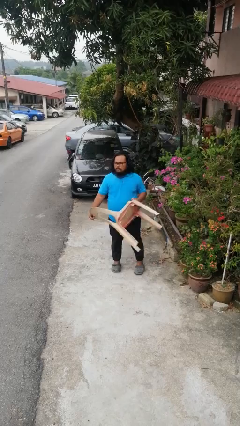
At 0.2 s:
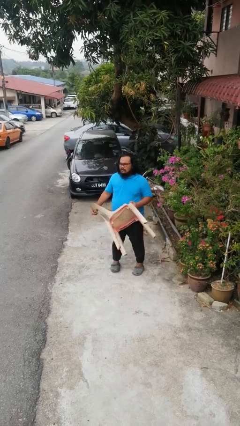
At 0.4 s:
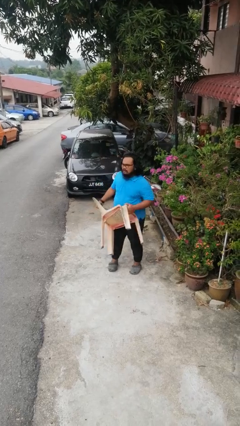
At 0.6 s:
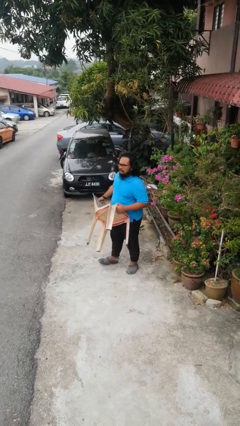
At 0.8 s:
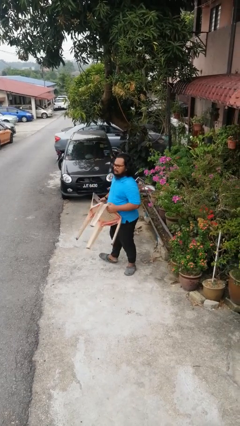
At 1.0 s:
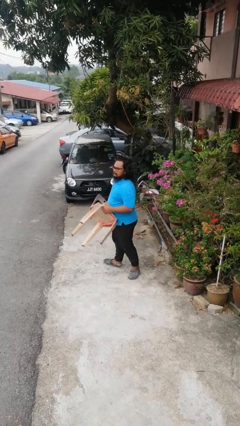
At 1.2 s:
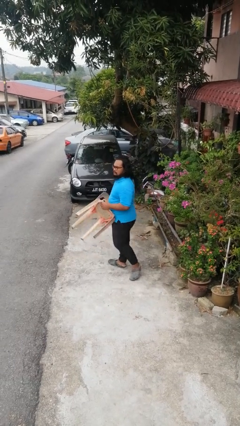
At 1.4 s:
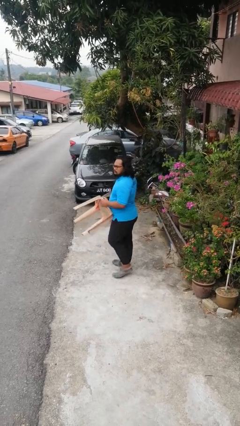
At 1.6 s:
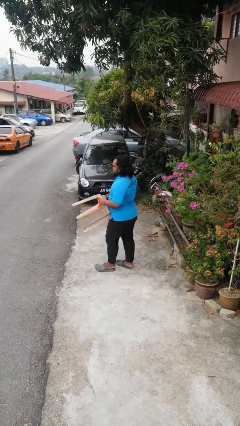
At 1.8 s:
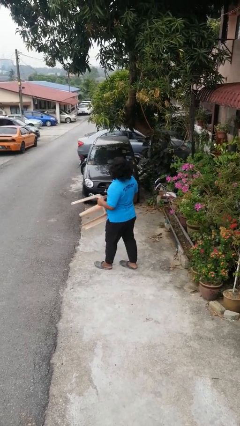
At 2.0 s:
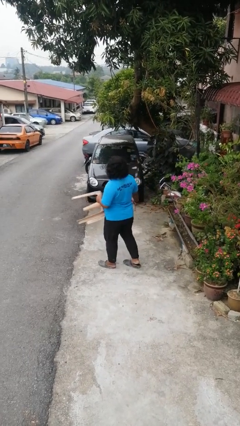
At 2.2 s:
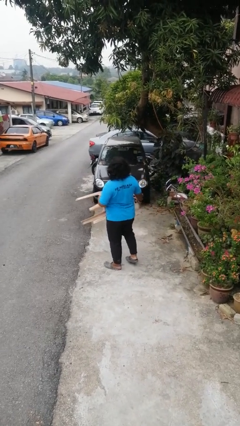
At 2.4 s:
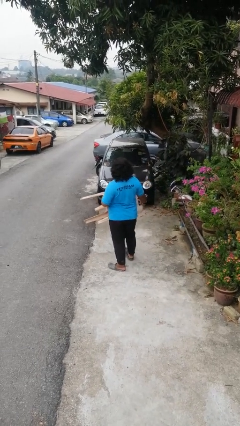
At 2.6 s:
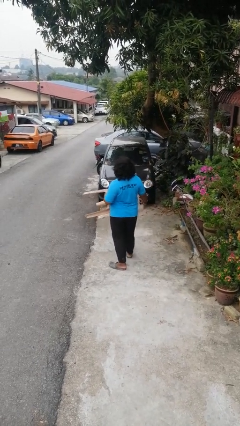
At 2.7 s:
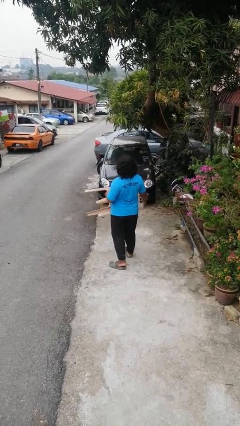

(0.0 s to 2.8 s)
person carries furniture

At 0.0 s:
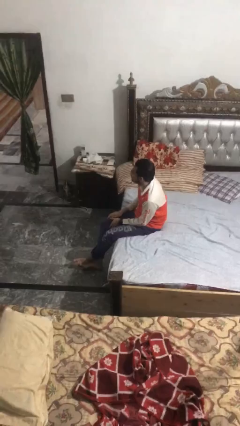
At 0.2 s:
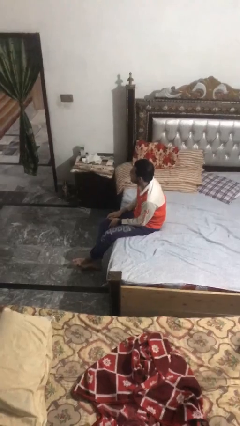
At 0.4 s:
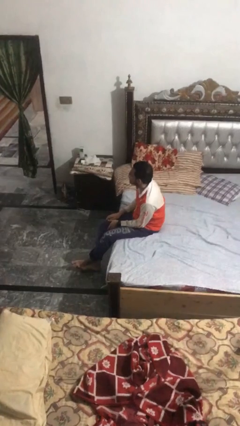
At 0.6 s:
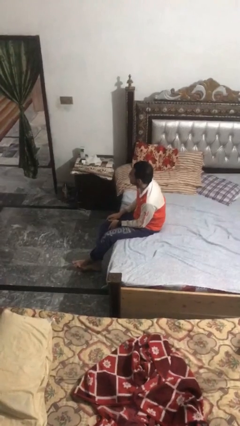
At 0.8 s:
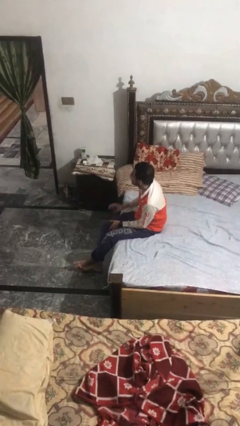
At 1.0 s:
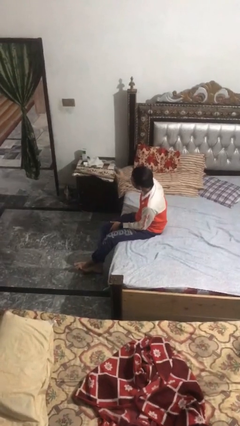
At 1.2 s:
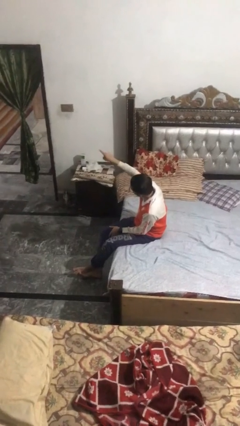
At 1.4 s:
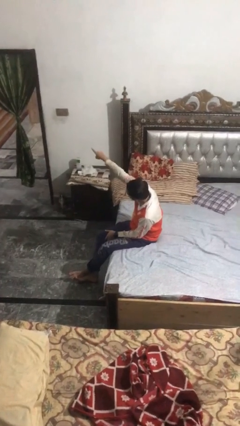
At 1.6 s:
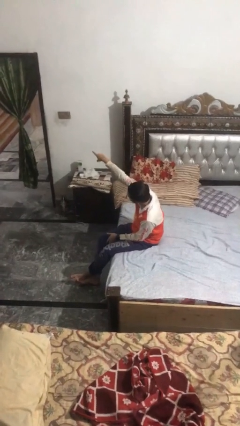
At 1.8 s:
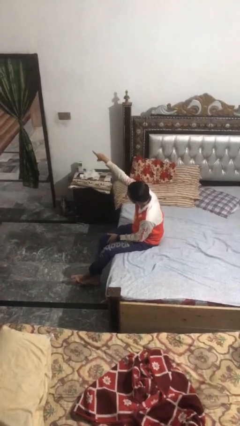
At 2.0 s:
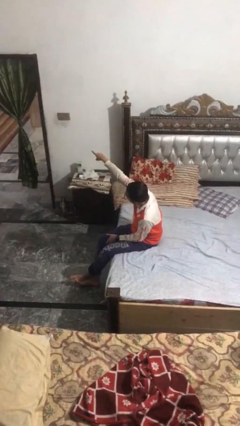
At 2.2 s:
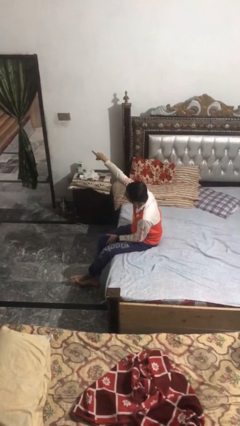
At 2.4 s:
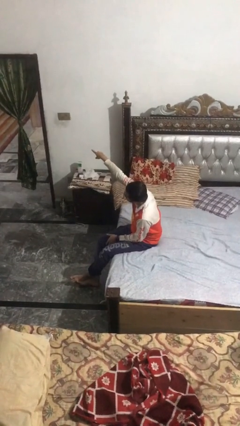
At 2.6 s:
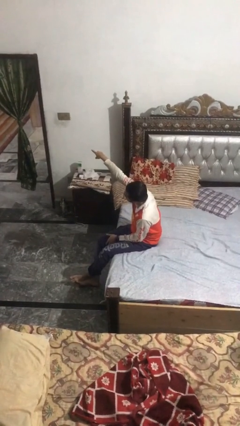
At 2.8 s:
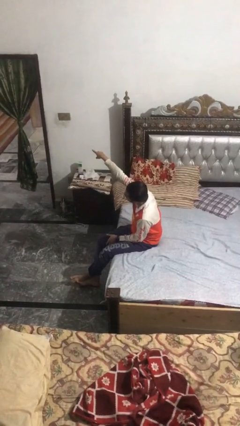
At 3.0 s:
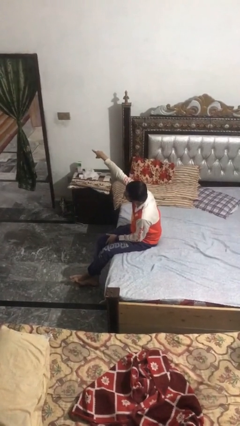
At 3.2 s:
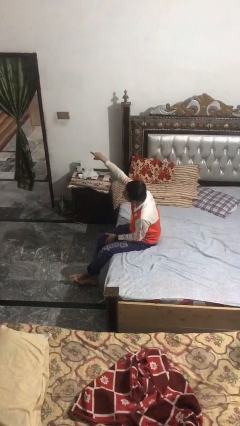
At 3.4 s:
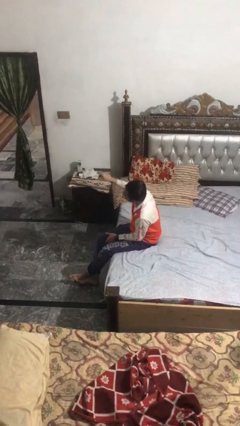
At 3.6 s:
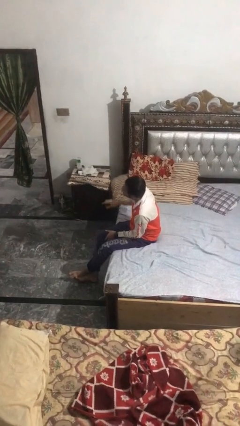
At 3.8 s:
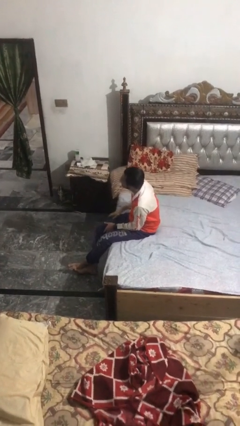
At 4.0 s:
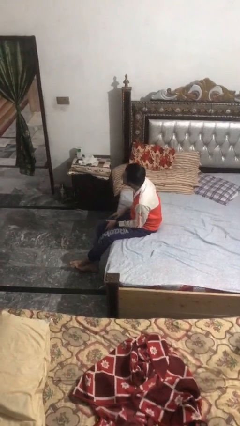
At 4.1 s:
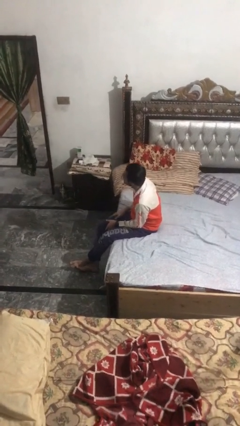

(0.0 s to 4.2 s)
person points at person

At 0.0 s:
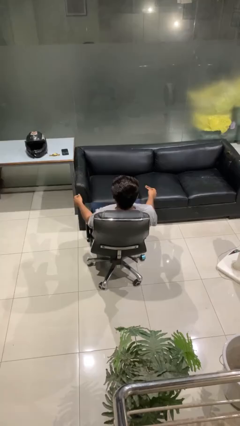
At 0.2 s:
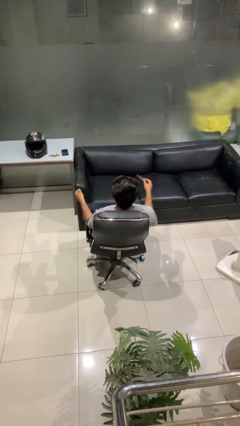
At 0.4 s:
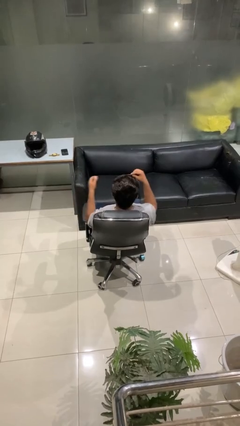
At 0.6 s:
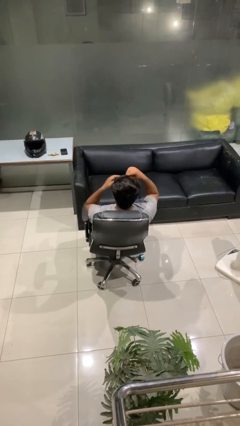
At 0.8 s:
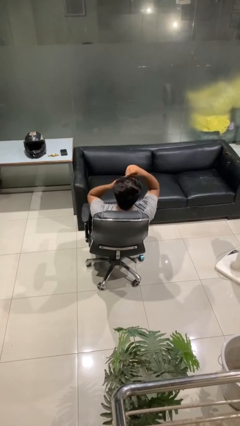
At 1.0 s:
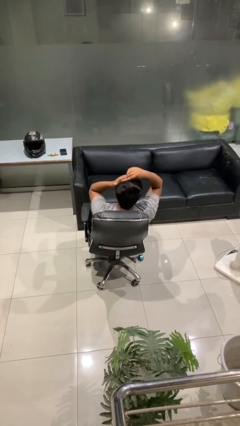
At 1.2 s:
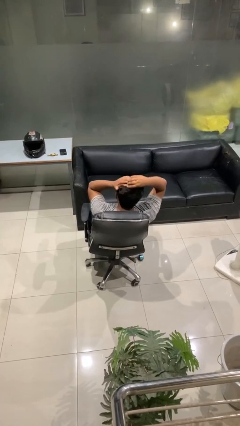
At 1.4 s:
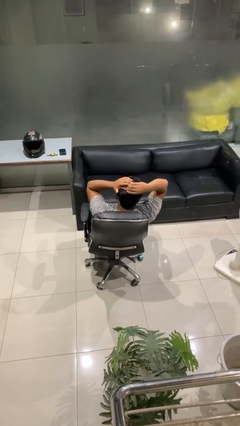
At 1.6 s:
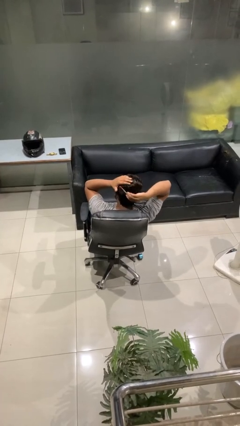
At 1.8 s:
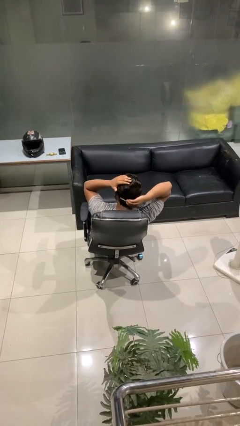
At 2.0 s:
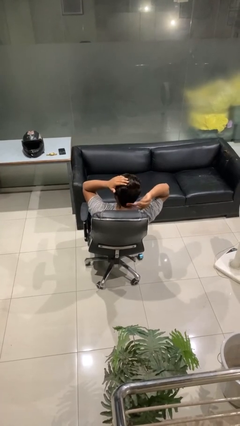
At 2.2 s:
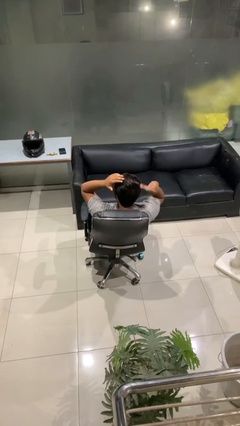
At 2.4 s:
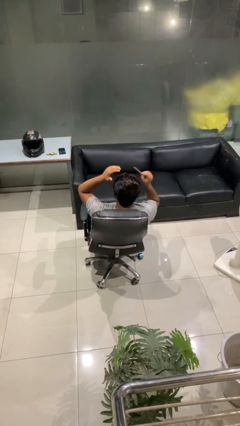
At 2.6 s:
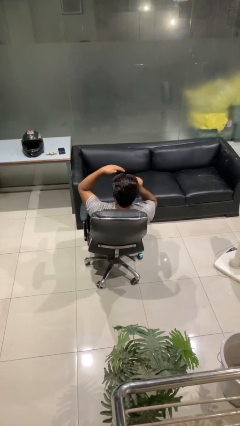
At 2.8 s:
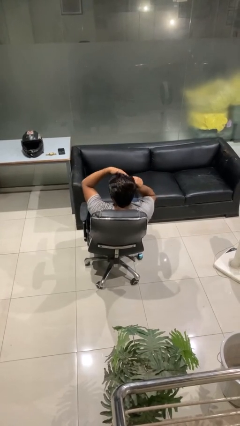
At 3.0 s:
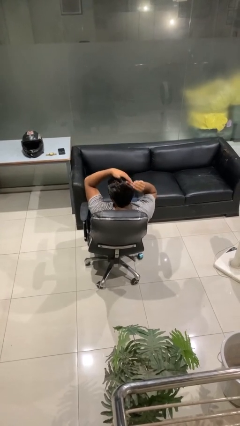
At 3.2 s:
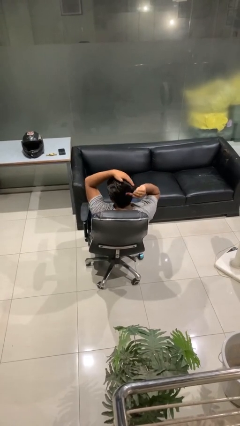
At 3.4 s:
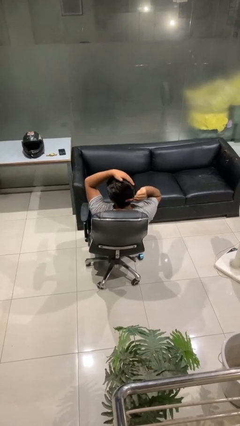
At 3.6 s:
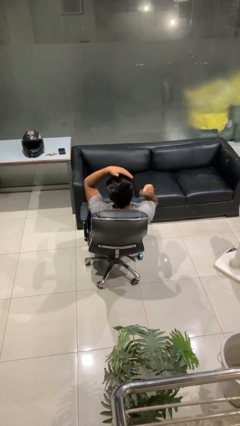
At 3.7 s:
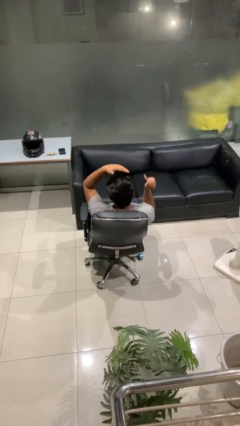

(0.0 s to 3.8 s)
person brushes hair

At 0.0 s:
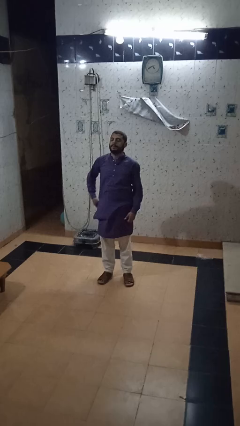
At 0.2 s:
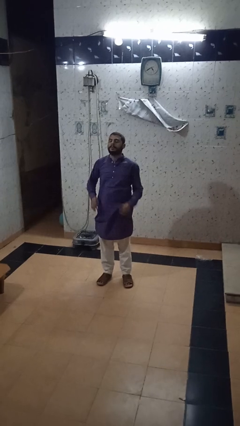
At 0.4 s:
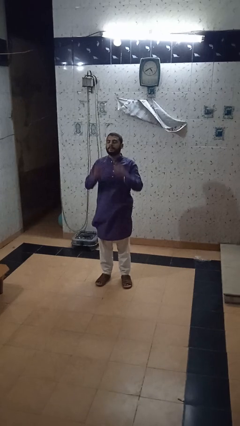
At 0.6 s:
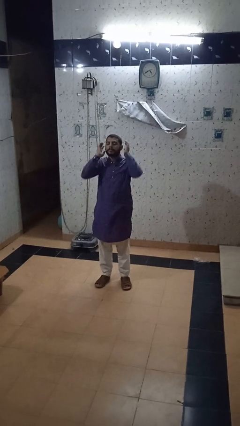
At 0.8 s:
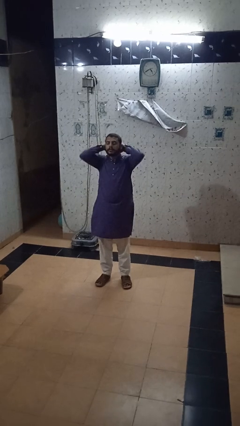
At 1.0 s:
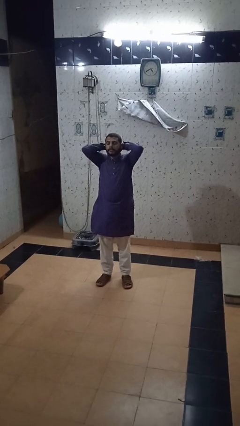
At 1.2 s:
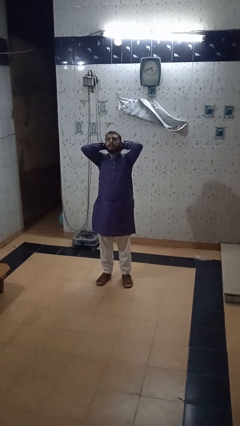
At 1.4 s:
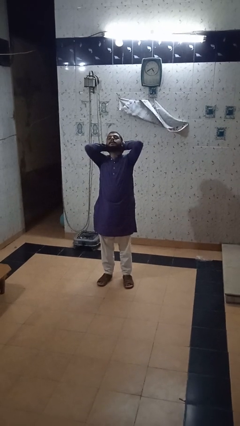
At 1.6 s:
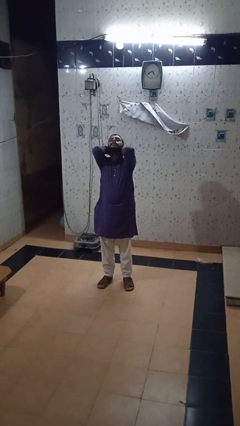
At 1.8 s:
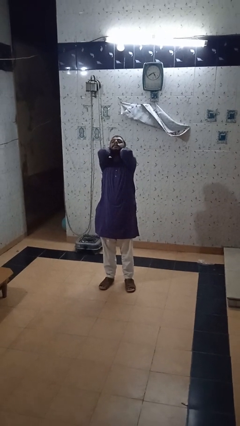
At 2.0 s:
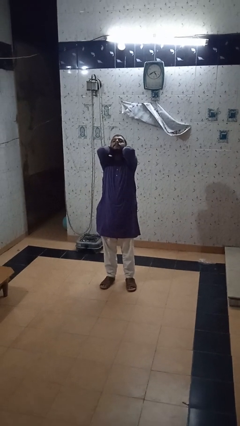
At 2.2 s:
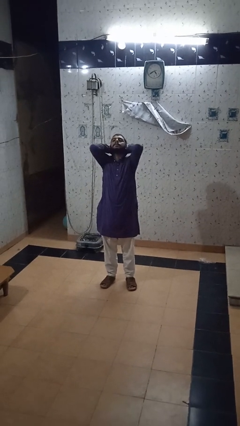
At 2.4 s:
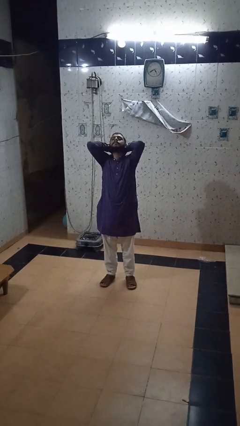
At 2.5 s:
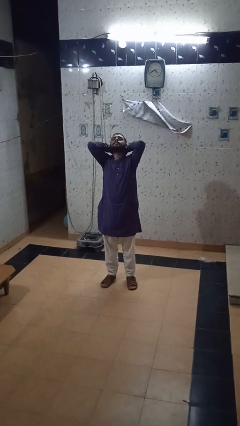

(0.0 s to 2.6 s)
person stretches arms over head

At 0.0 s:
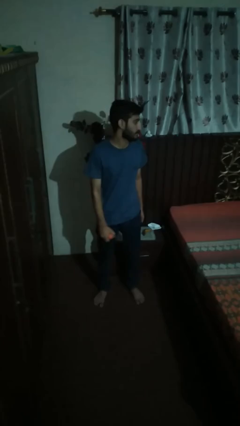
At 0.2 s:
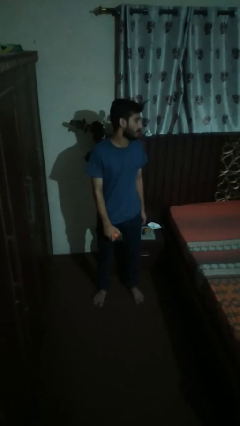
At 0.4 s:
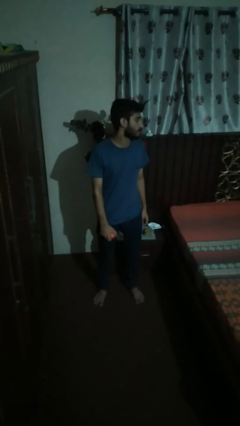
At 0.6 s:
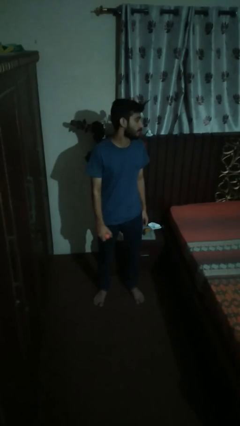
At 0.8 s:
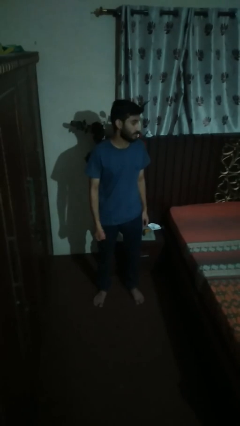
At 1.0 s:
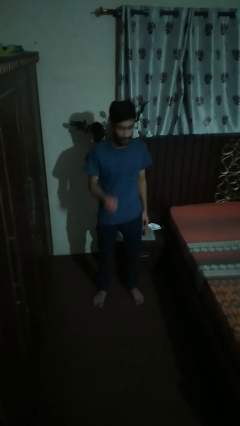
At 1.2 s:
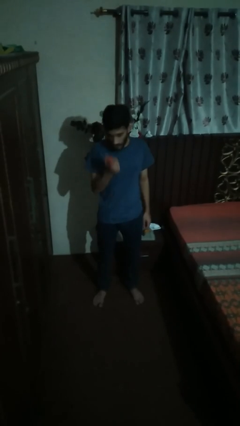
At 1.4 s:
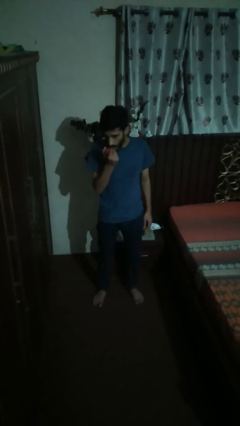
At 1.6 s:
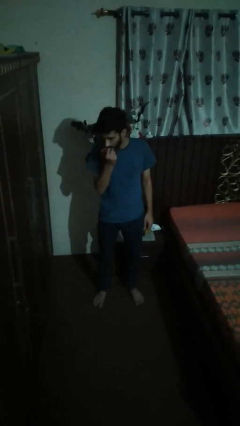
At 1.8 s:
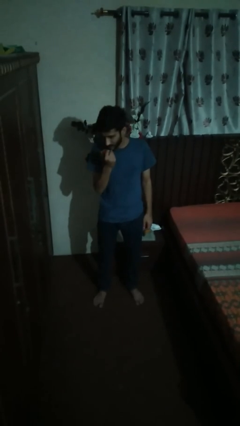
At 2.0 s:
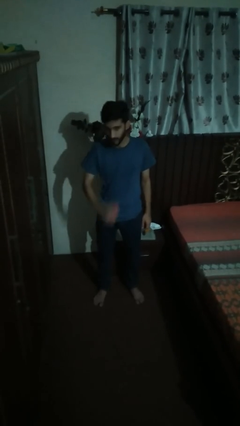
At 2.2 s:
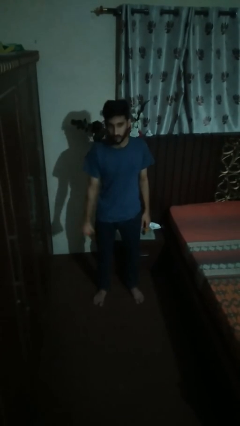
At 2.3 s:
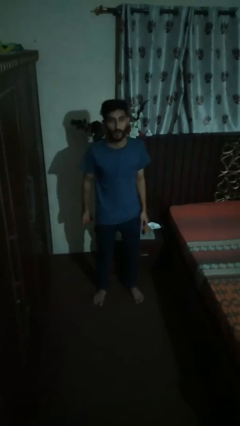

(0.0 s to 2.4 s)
person eats apple

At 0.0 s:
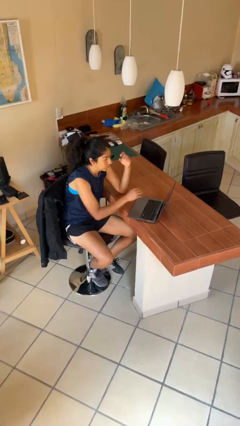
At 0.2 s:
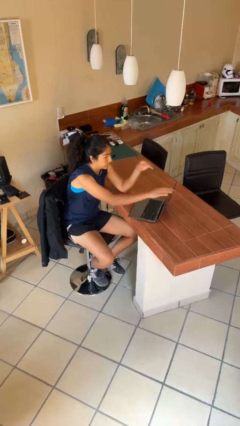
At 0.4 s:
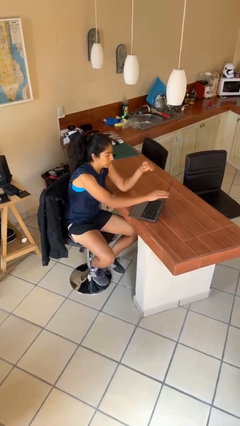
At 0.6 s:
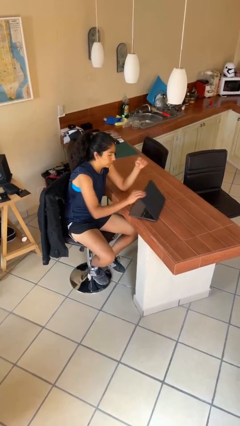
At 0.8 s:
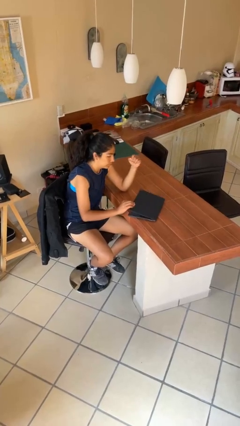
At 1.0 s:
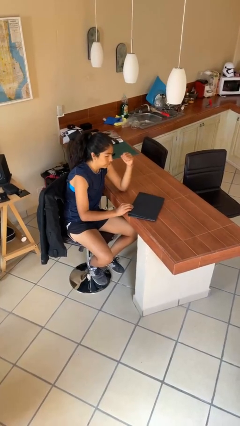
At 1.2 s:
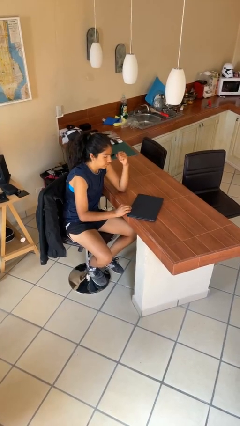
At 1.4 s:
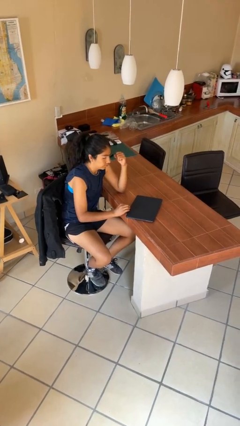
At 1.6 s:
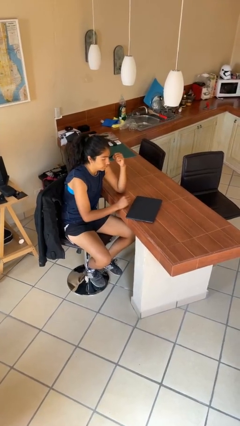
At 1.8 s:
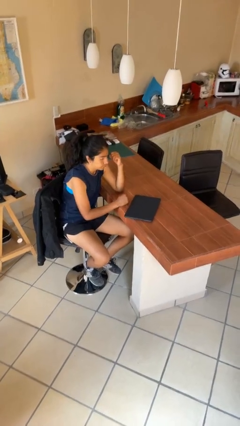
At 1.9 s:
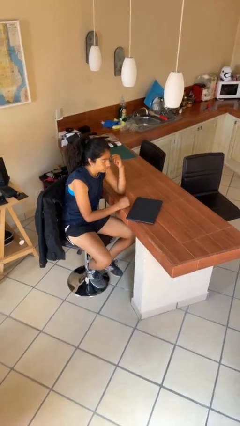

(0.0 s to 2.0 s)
person closes laptop
